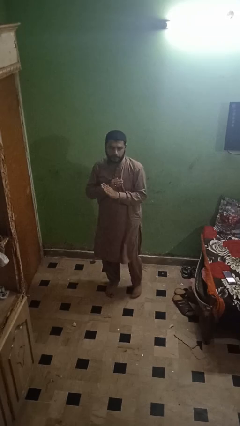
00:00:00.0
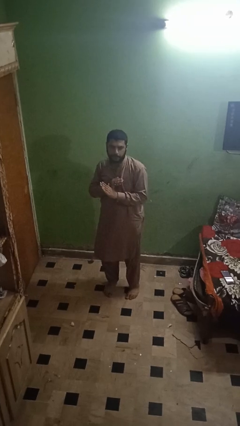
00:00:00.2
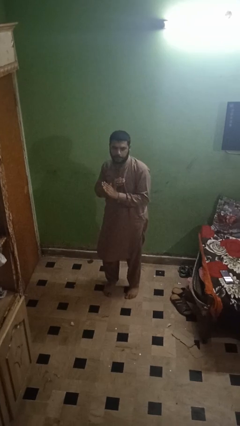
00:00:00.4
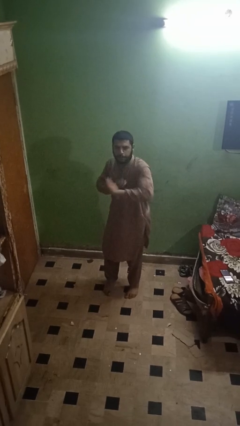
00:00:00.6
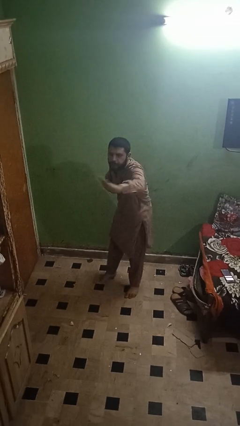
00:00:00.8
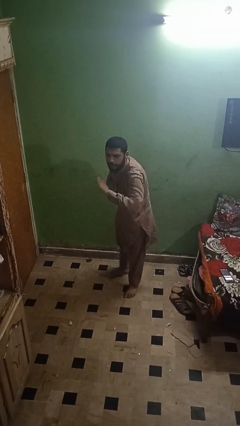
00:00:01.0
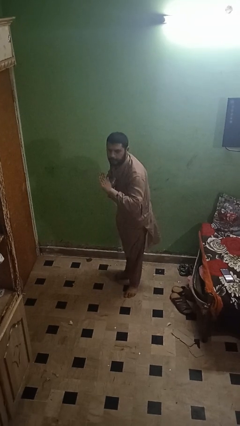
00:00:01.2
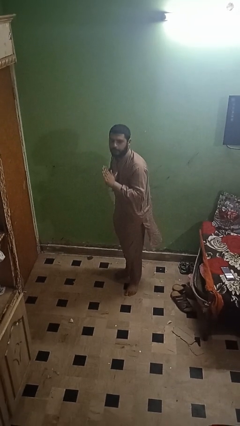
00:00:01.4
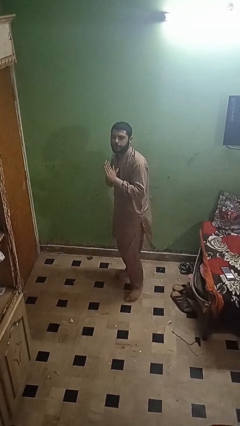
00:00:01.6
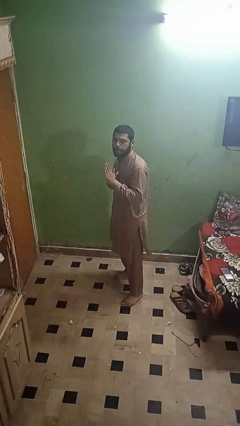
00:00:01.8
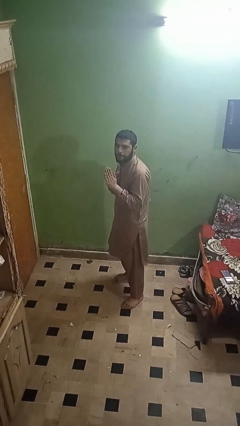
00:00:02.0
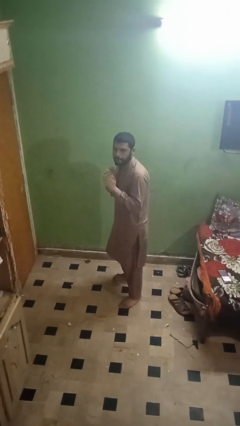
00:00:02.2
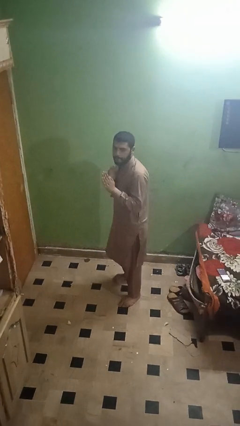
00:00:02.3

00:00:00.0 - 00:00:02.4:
person karate chop

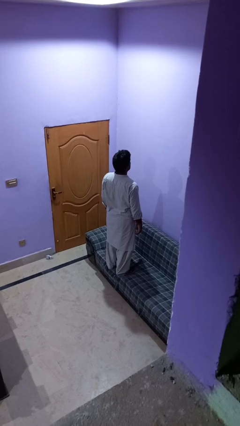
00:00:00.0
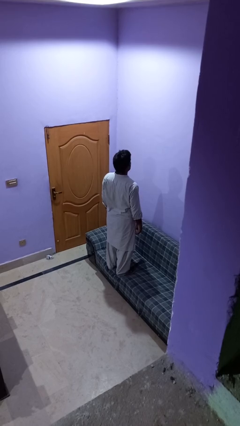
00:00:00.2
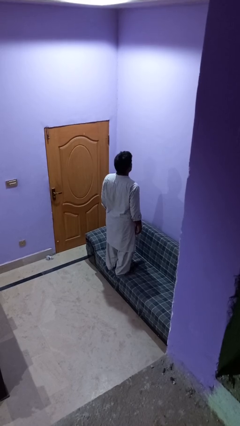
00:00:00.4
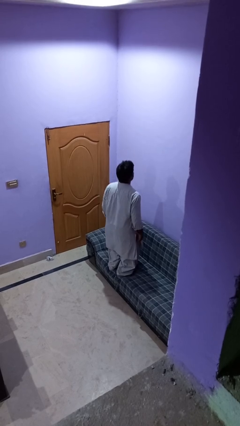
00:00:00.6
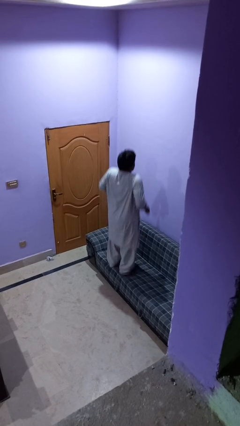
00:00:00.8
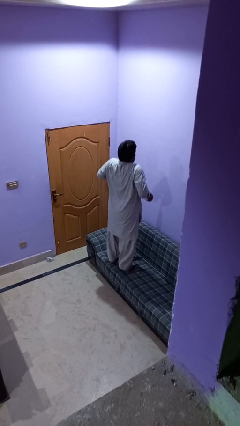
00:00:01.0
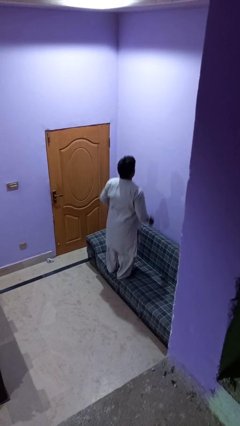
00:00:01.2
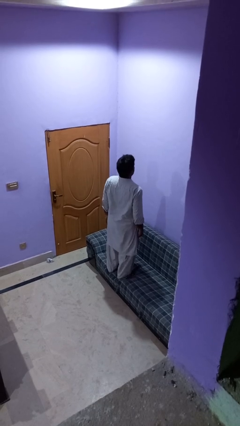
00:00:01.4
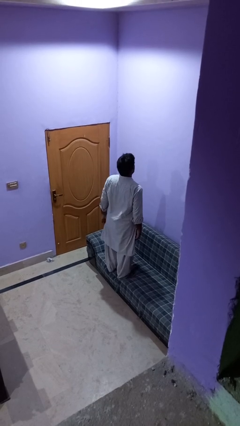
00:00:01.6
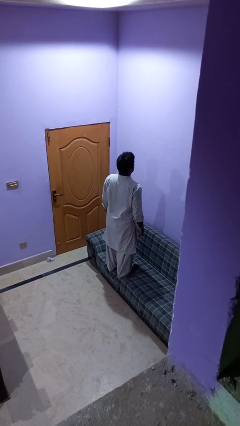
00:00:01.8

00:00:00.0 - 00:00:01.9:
person jumps on couch

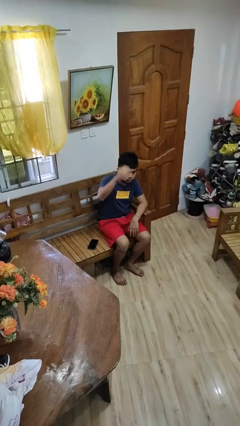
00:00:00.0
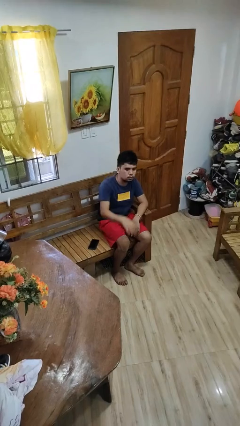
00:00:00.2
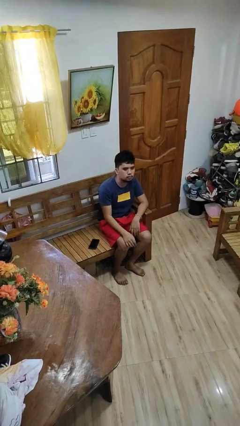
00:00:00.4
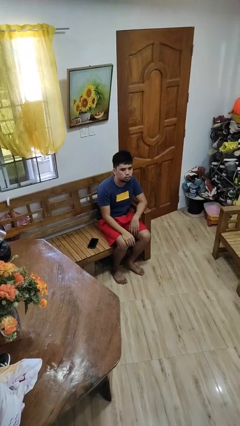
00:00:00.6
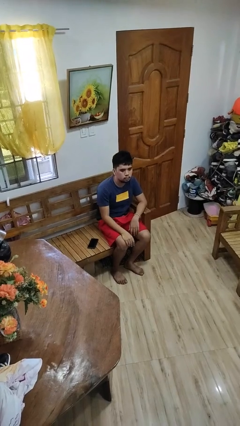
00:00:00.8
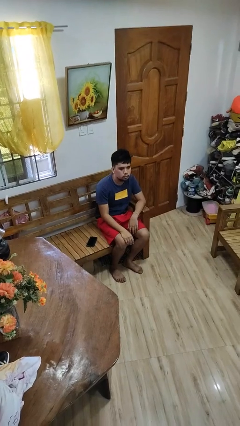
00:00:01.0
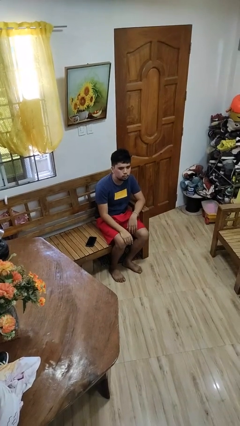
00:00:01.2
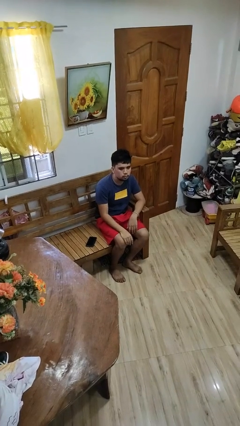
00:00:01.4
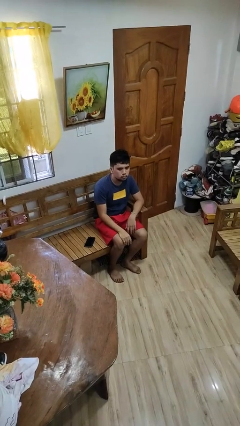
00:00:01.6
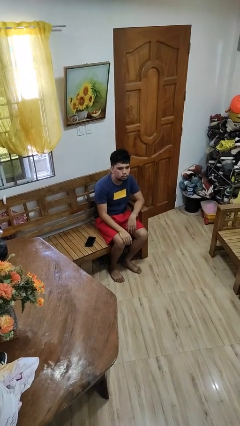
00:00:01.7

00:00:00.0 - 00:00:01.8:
person gestures lower hand

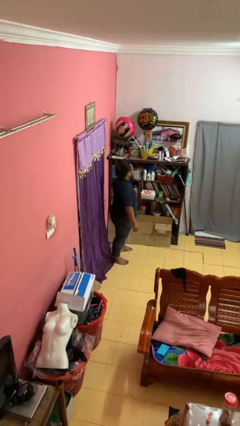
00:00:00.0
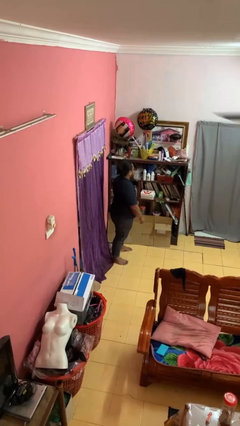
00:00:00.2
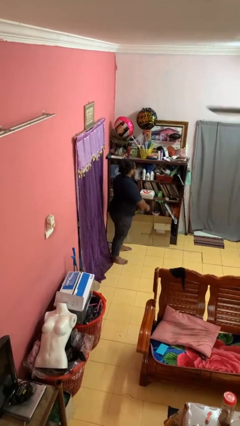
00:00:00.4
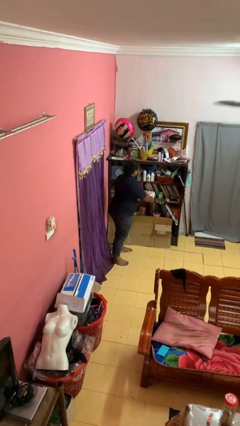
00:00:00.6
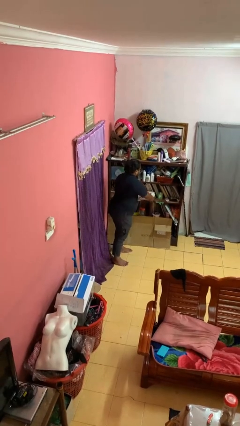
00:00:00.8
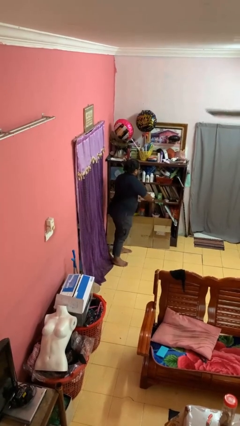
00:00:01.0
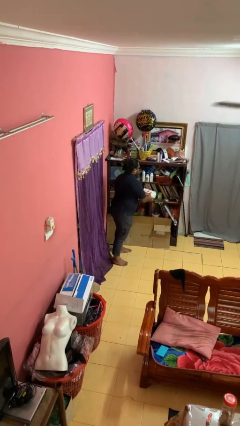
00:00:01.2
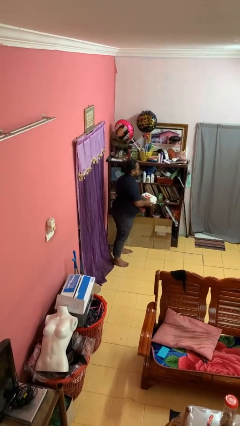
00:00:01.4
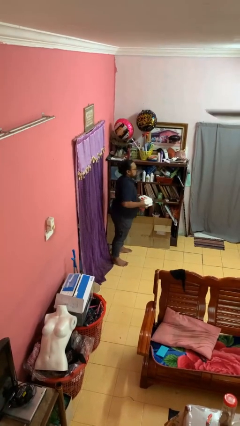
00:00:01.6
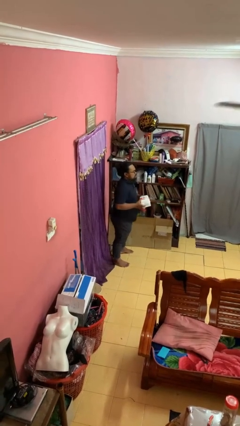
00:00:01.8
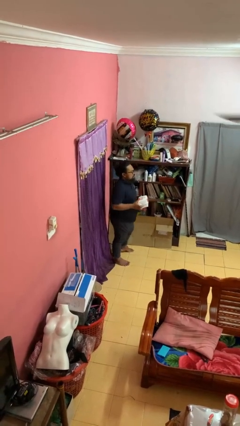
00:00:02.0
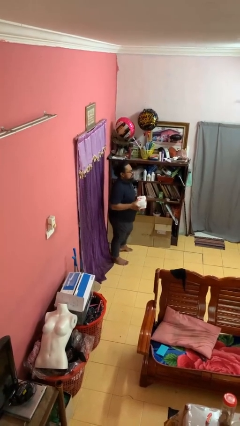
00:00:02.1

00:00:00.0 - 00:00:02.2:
person takes object from cabinet

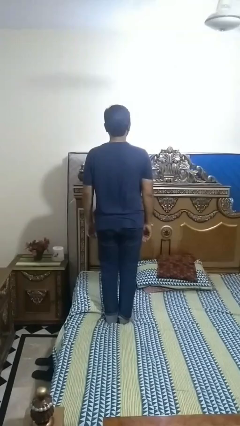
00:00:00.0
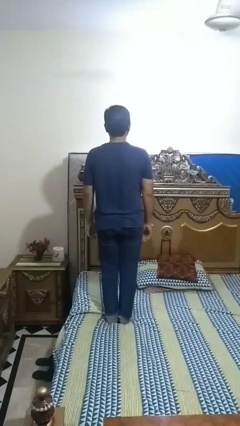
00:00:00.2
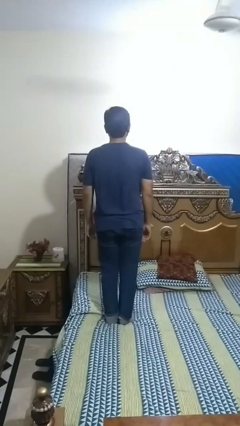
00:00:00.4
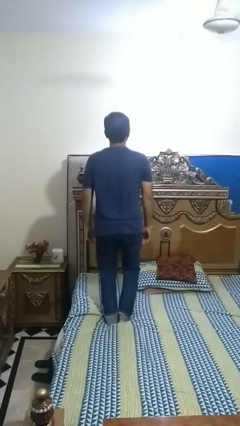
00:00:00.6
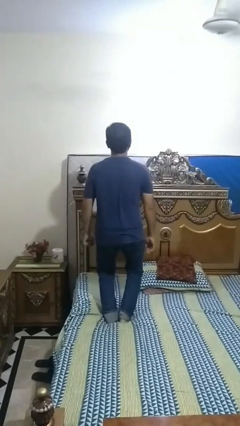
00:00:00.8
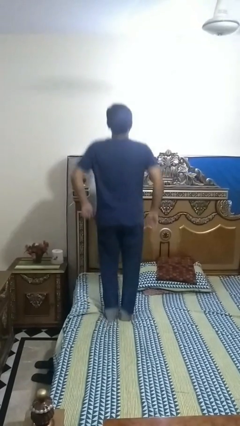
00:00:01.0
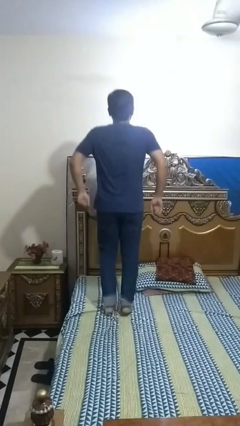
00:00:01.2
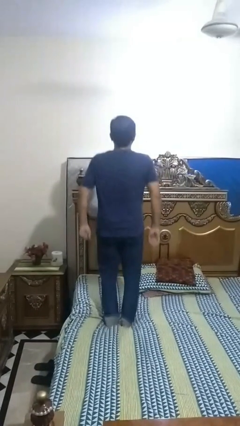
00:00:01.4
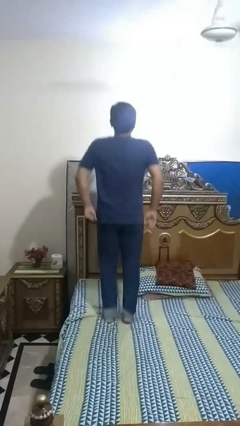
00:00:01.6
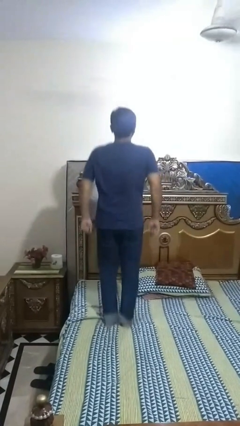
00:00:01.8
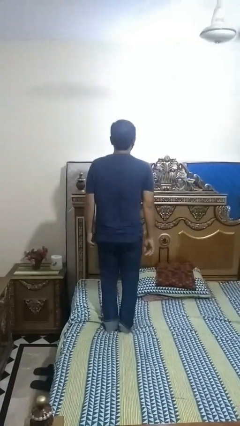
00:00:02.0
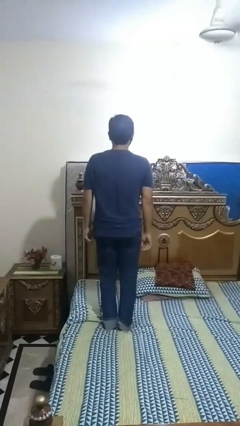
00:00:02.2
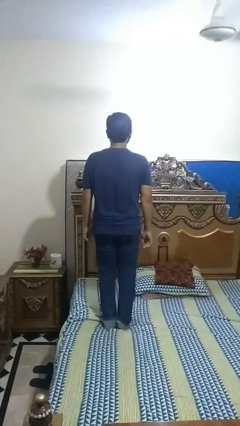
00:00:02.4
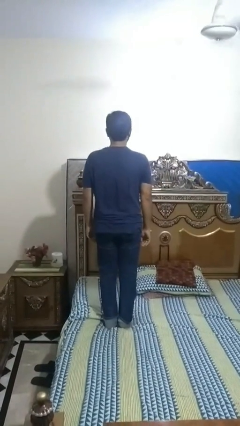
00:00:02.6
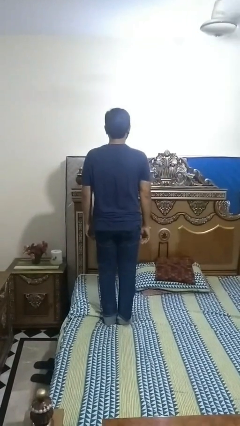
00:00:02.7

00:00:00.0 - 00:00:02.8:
person jumps on bed

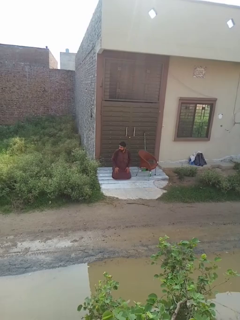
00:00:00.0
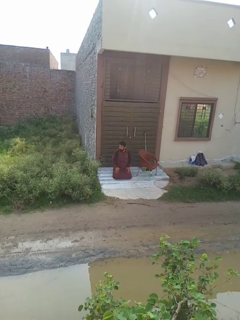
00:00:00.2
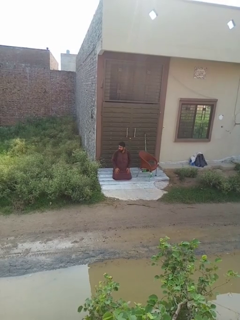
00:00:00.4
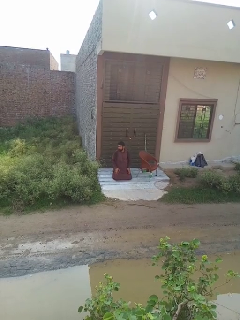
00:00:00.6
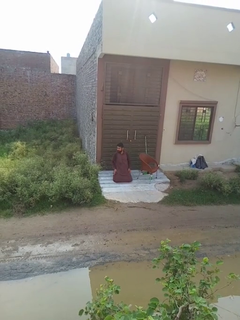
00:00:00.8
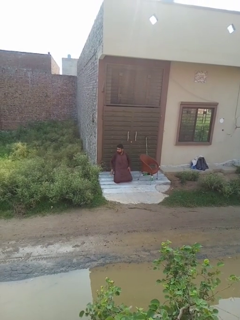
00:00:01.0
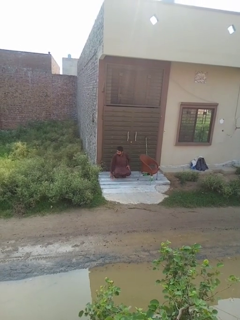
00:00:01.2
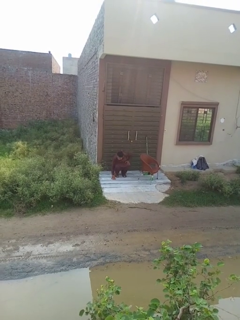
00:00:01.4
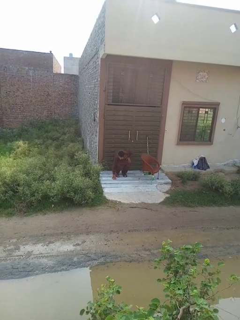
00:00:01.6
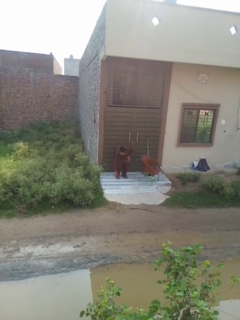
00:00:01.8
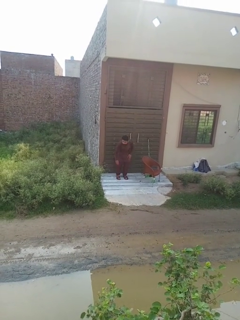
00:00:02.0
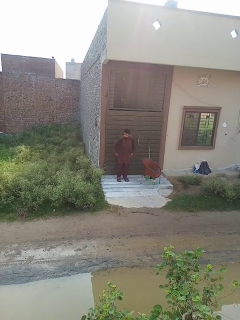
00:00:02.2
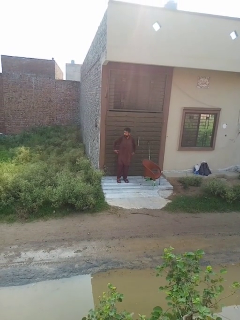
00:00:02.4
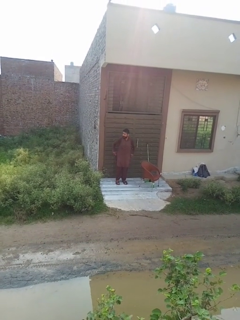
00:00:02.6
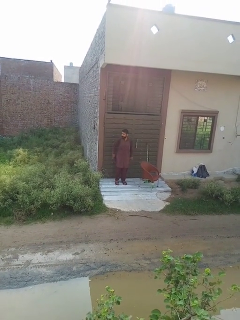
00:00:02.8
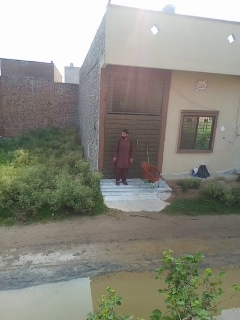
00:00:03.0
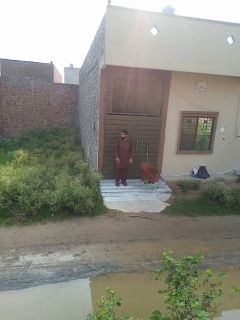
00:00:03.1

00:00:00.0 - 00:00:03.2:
person stands up from floor

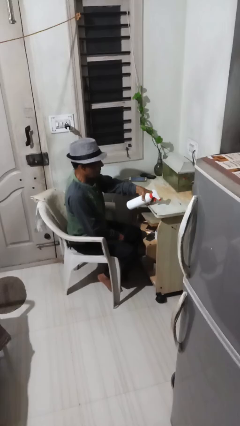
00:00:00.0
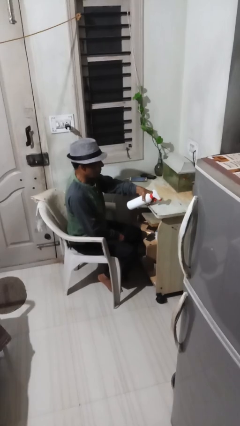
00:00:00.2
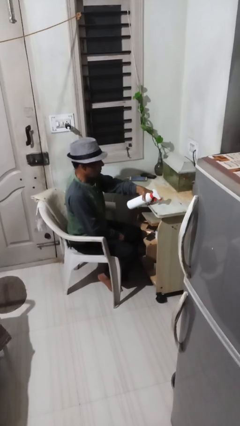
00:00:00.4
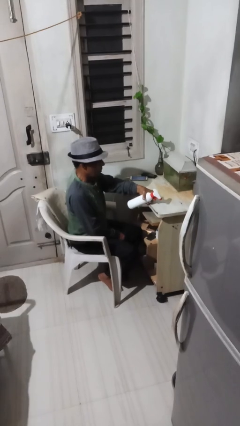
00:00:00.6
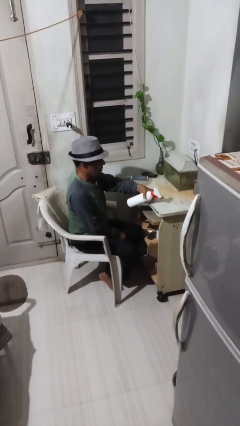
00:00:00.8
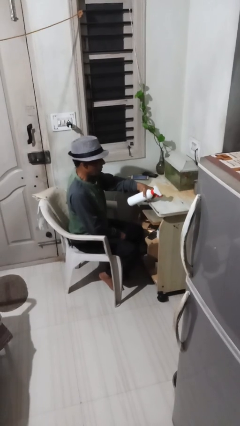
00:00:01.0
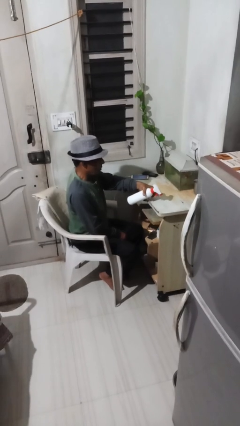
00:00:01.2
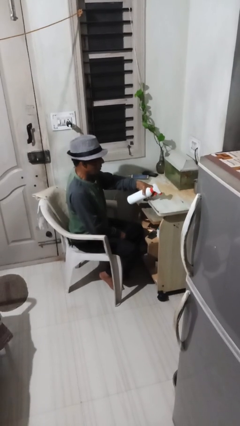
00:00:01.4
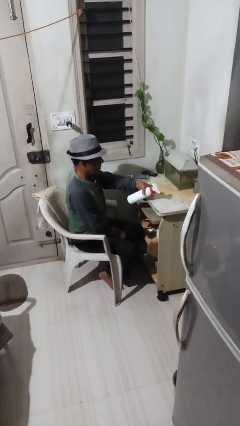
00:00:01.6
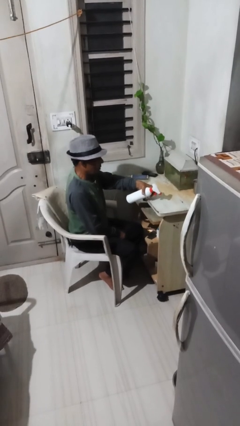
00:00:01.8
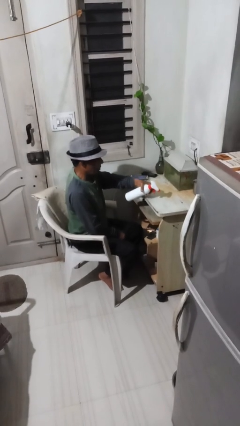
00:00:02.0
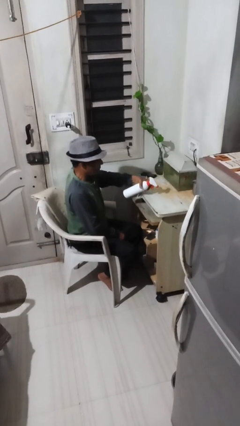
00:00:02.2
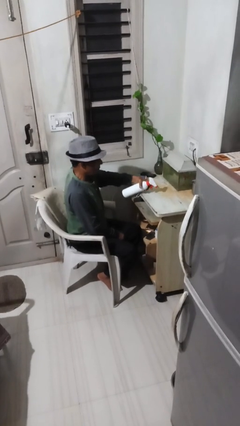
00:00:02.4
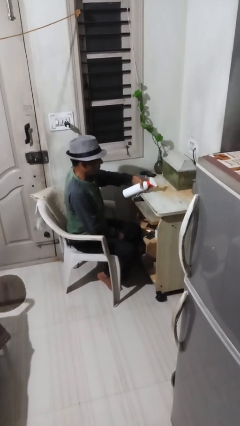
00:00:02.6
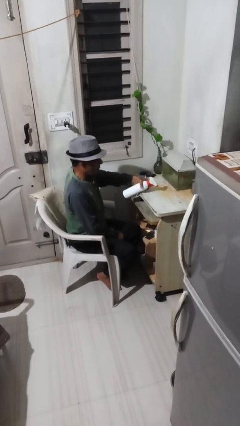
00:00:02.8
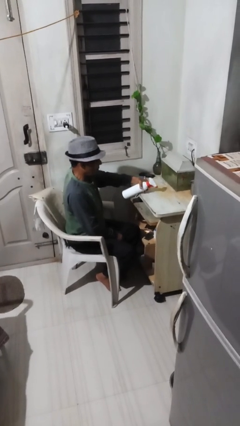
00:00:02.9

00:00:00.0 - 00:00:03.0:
person sprays from bottle

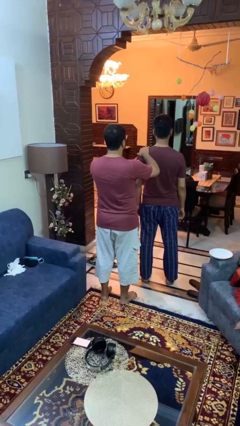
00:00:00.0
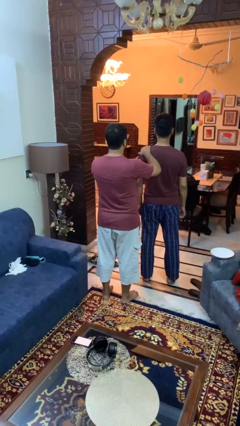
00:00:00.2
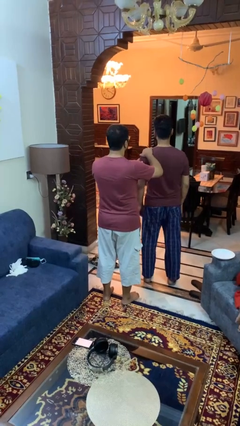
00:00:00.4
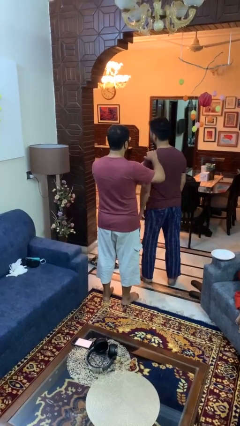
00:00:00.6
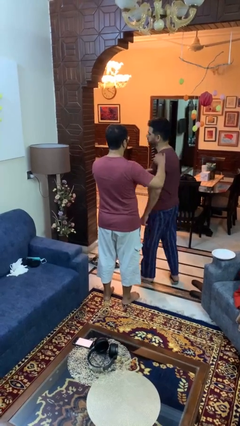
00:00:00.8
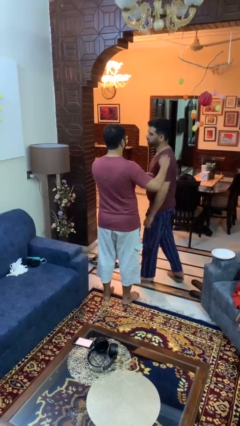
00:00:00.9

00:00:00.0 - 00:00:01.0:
person spins person around
